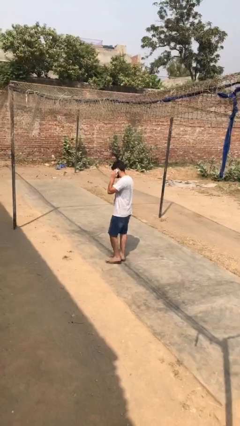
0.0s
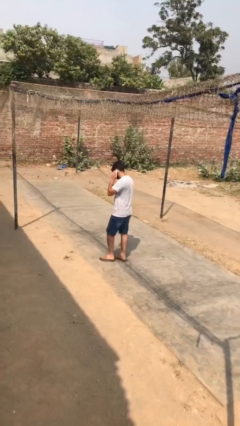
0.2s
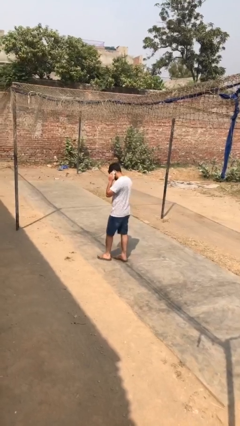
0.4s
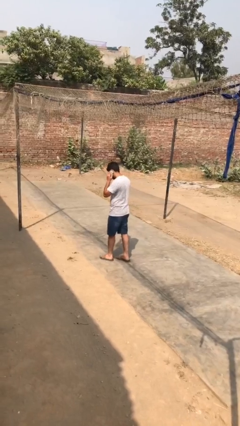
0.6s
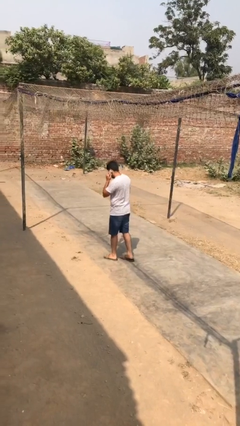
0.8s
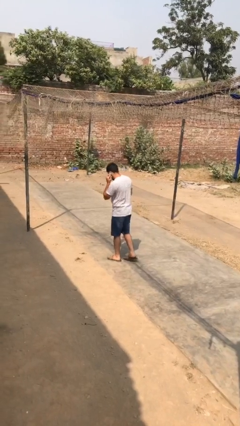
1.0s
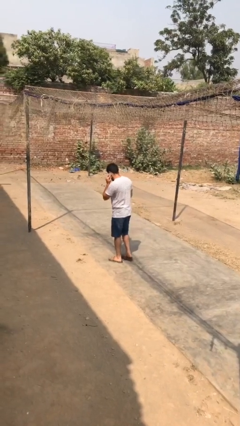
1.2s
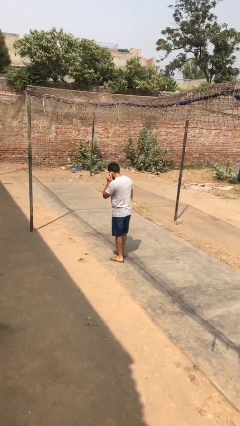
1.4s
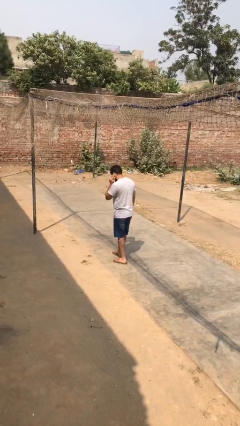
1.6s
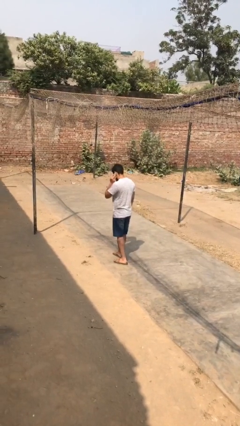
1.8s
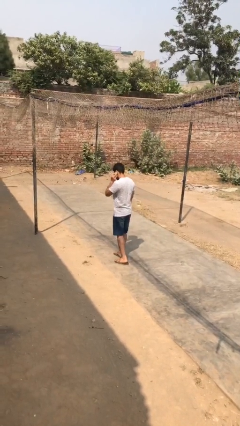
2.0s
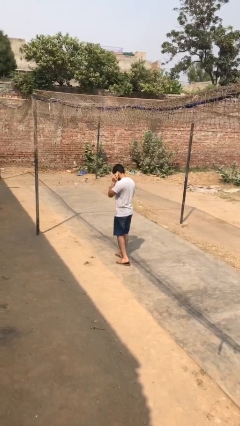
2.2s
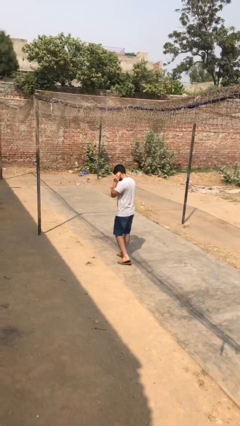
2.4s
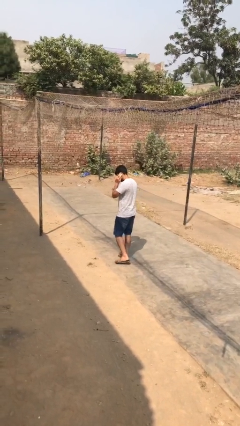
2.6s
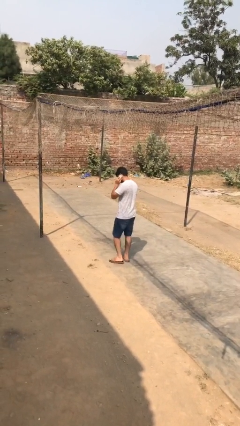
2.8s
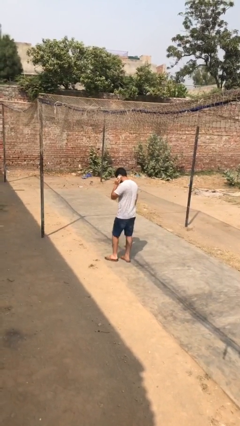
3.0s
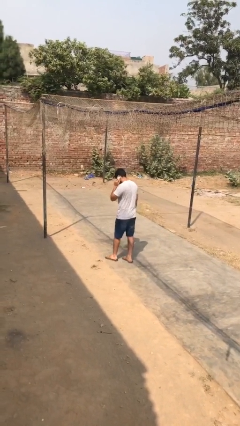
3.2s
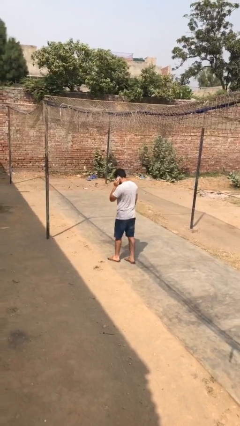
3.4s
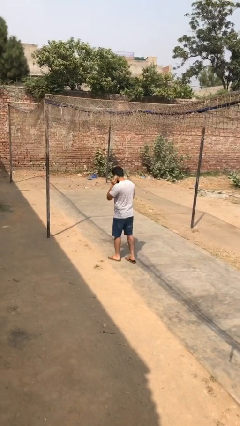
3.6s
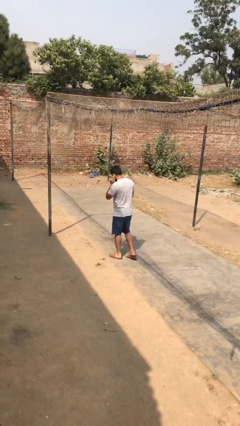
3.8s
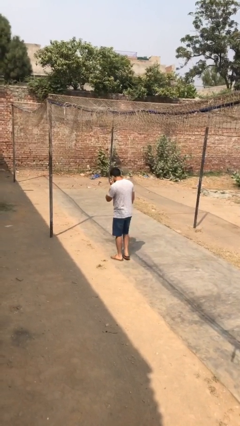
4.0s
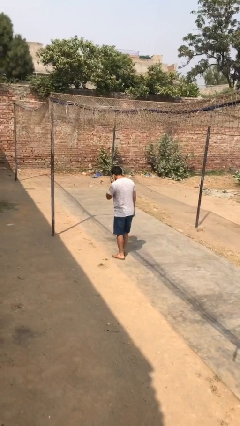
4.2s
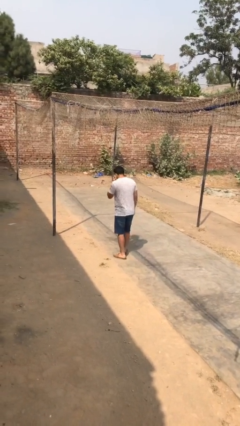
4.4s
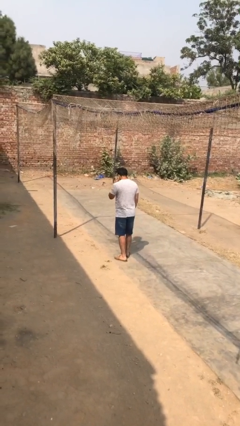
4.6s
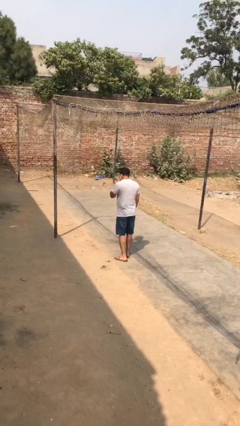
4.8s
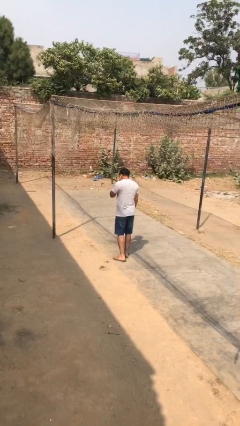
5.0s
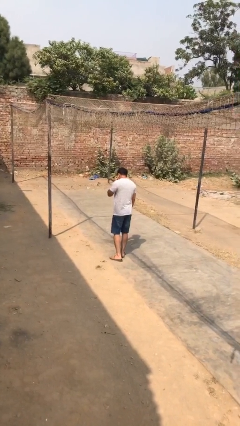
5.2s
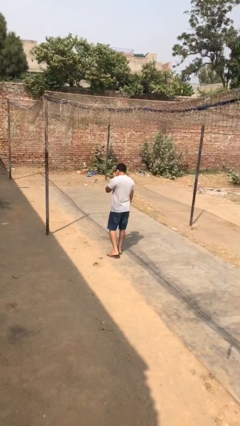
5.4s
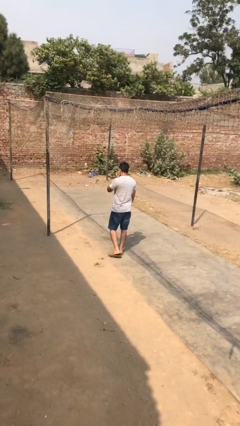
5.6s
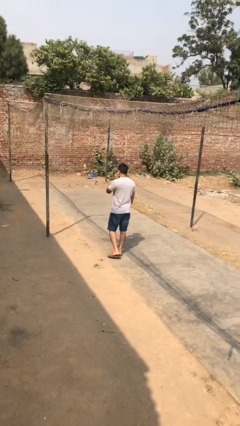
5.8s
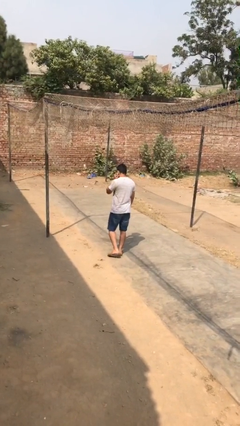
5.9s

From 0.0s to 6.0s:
person talks on phone

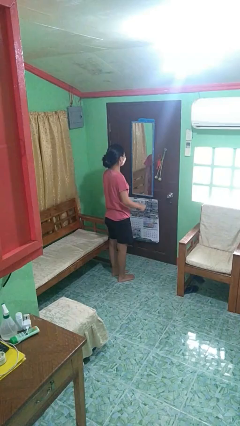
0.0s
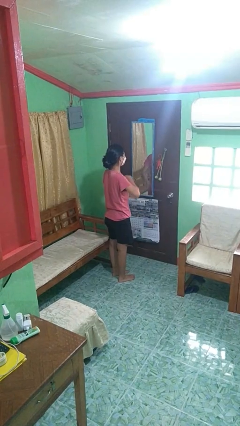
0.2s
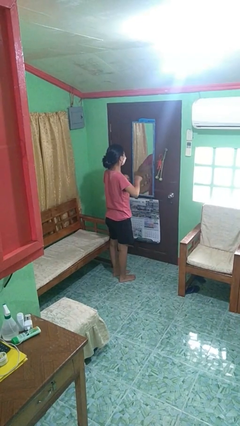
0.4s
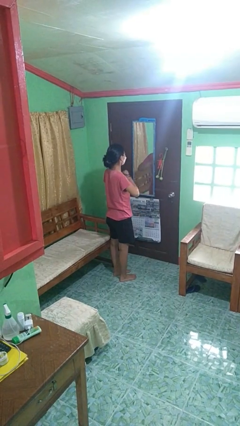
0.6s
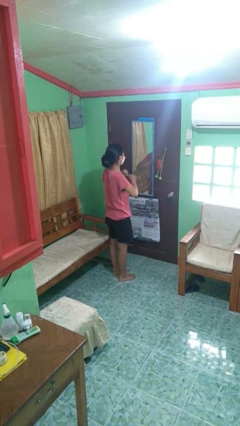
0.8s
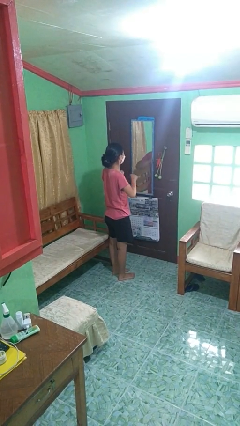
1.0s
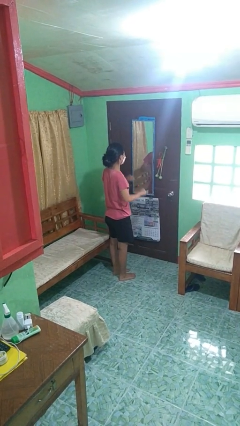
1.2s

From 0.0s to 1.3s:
person drums on chest

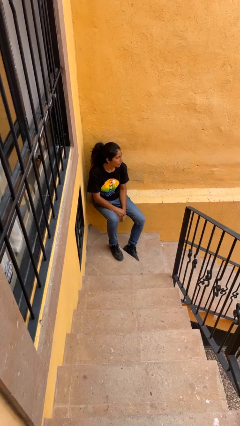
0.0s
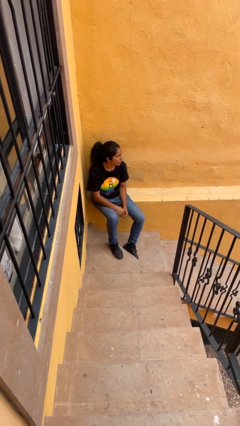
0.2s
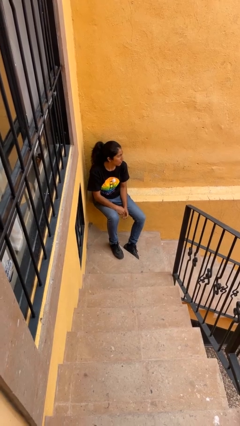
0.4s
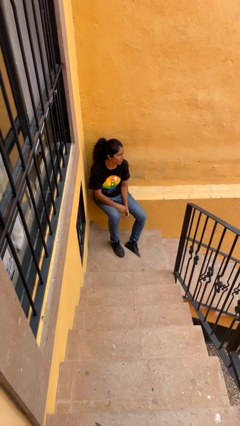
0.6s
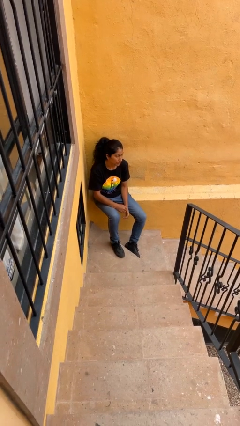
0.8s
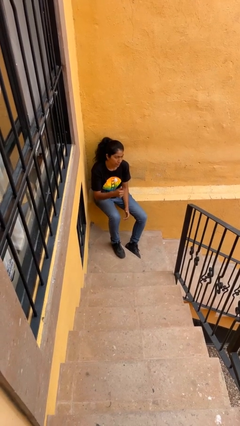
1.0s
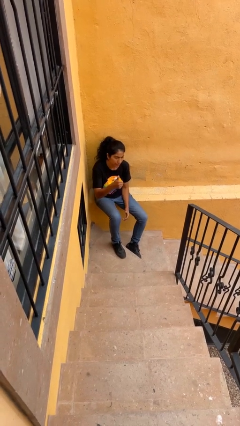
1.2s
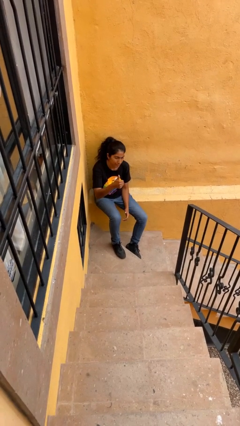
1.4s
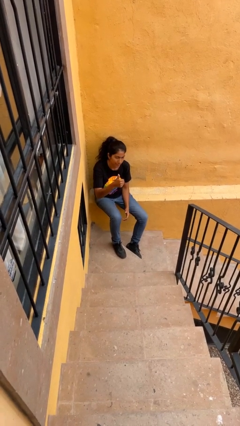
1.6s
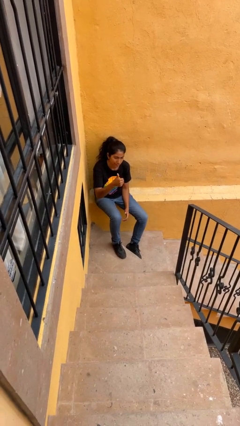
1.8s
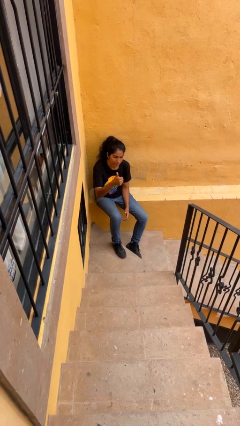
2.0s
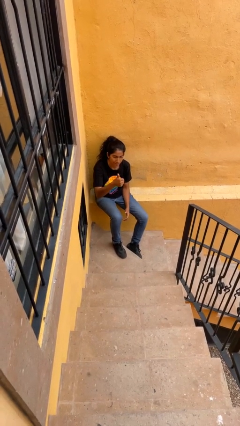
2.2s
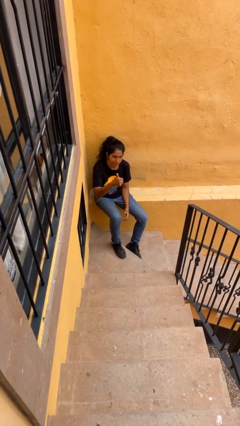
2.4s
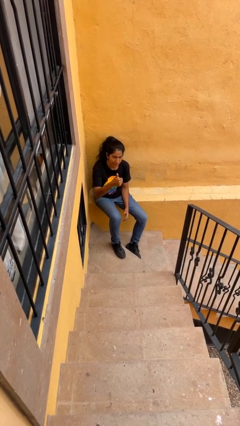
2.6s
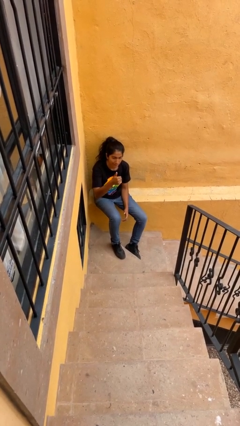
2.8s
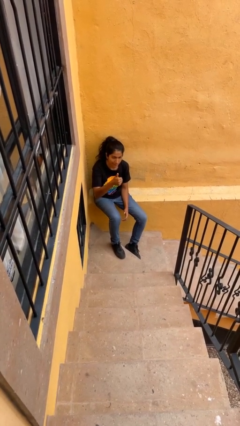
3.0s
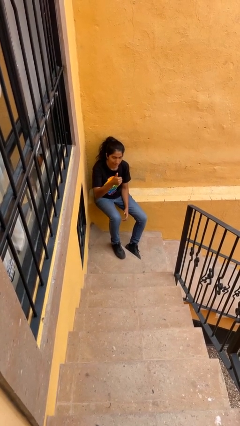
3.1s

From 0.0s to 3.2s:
person gestures thumbs up

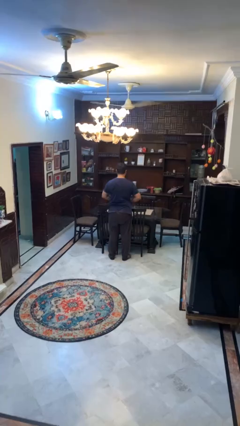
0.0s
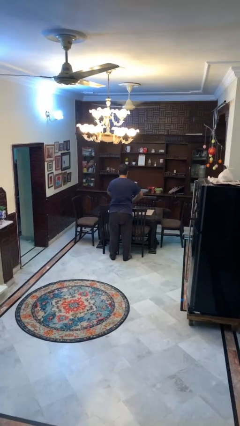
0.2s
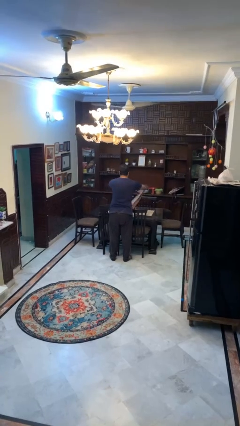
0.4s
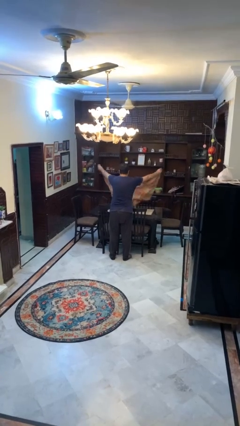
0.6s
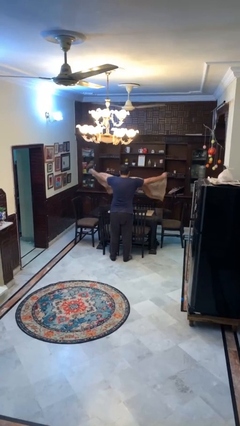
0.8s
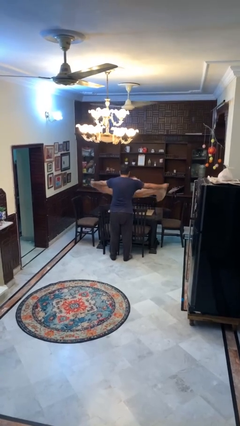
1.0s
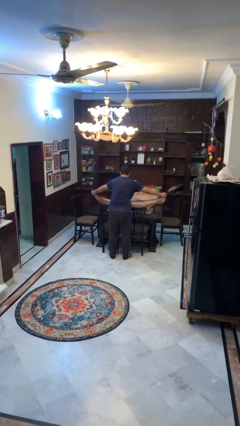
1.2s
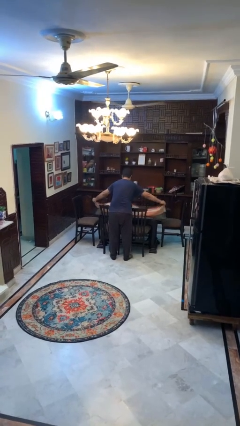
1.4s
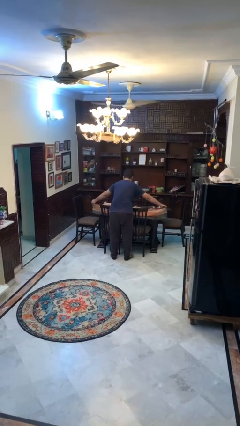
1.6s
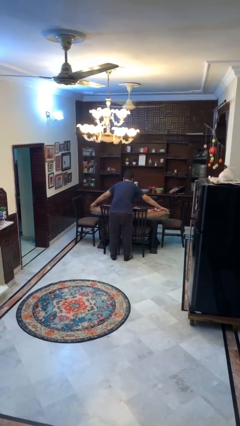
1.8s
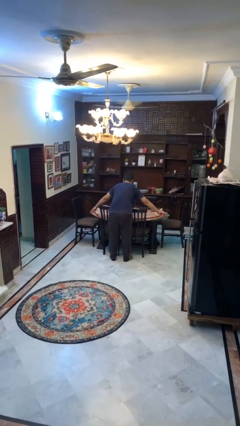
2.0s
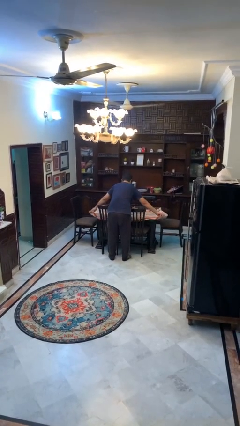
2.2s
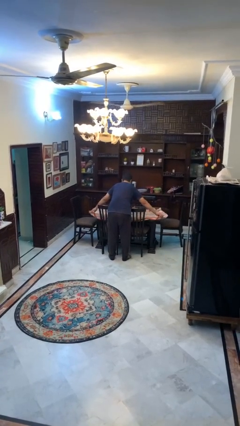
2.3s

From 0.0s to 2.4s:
person spreads tablecloth

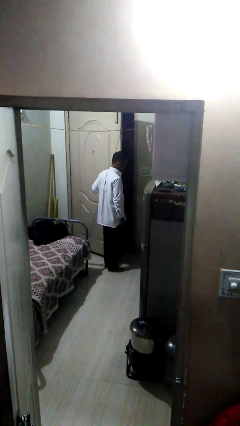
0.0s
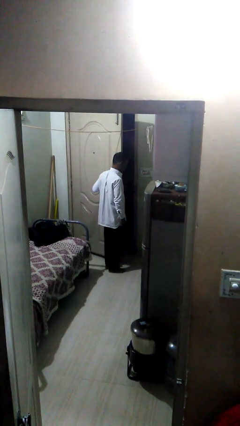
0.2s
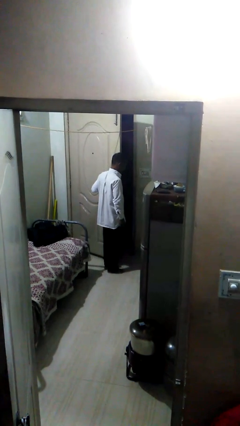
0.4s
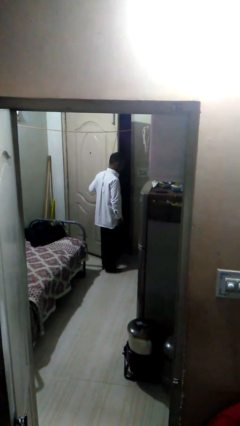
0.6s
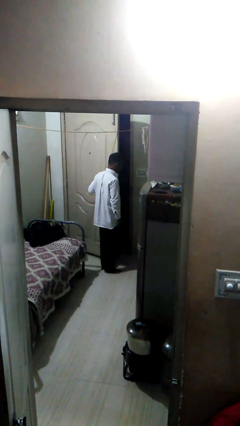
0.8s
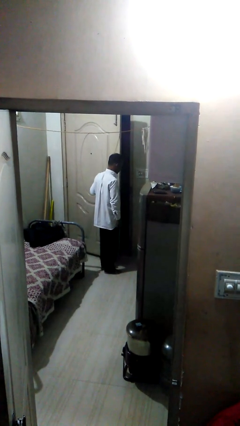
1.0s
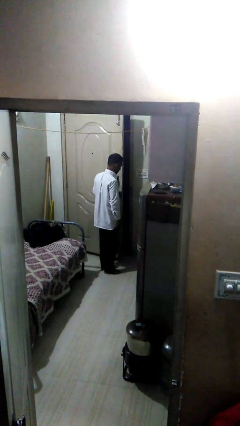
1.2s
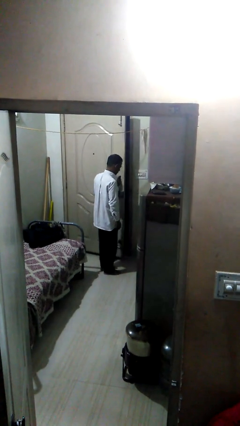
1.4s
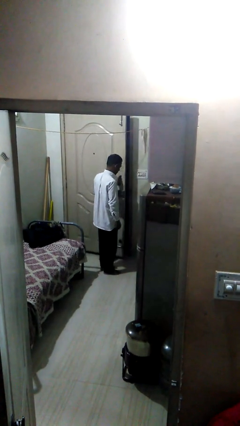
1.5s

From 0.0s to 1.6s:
person closes facility door

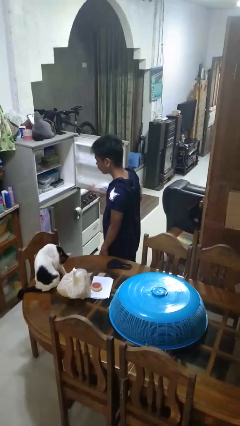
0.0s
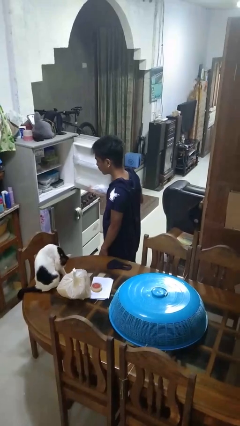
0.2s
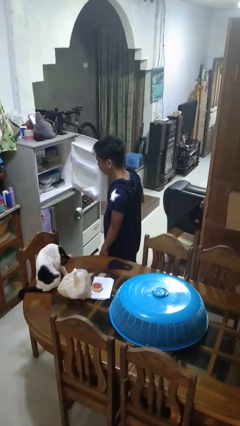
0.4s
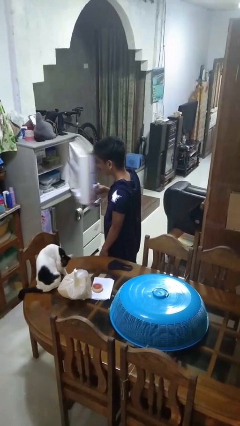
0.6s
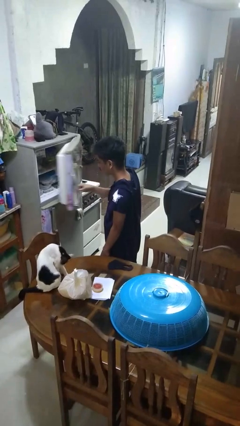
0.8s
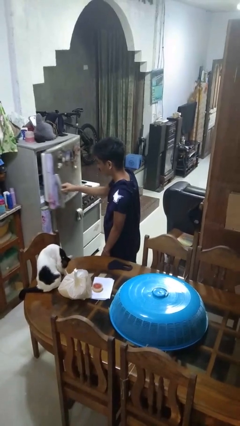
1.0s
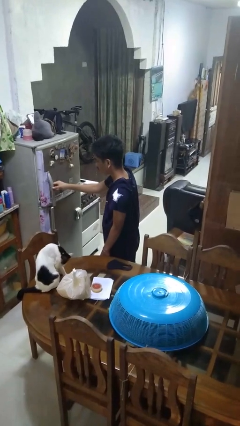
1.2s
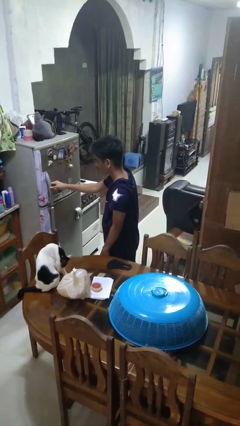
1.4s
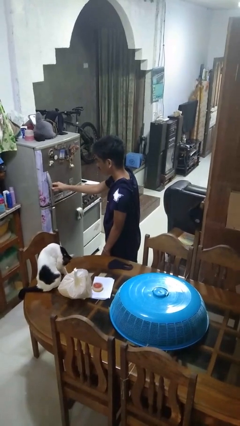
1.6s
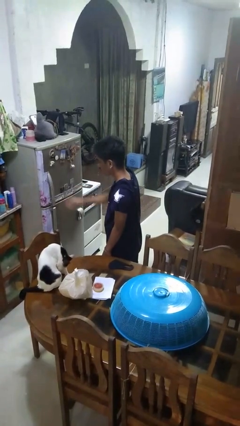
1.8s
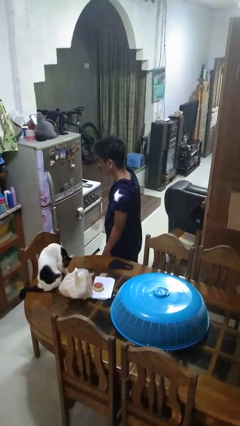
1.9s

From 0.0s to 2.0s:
person closes refrigerator

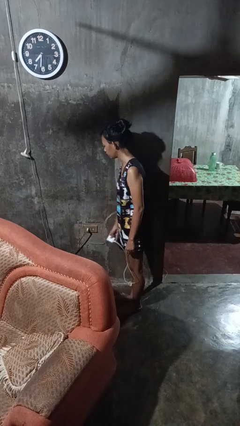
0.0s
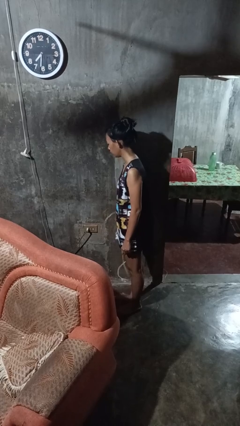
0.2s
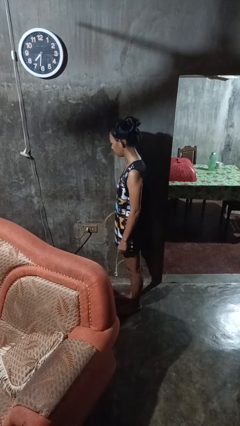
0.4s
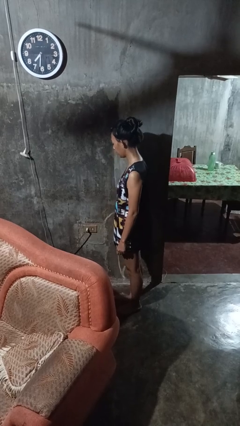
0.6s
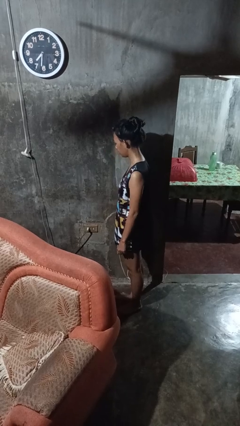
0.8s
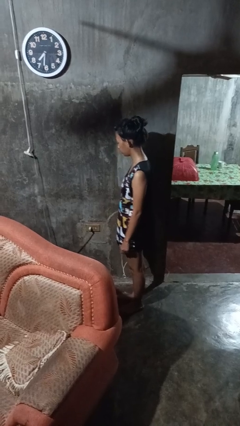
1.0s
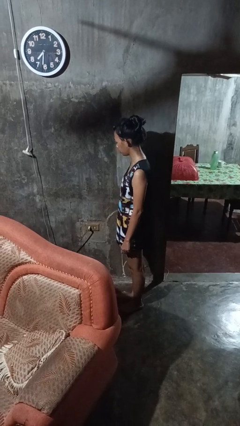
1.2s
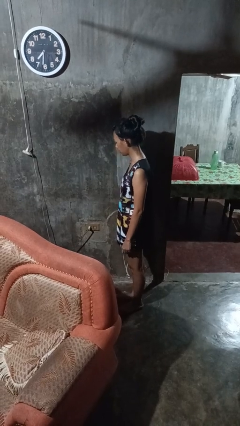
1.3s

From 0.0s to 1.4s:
person unplugs from electrical socket
